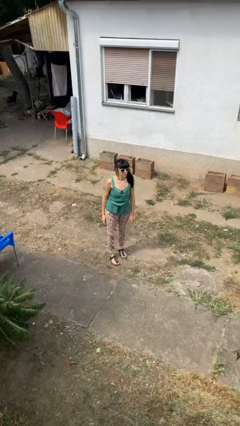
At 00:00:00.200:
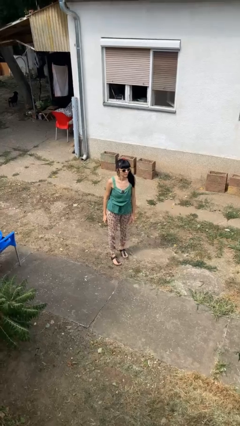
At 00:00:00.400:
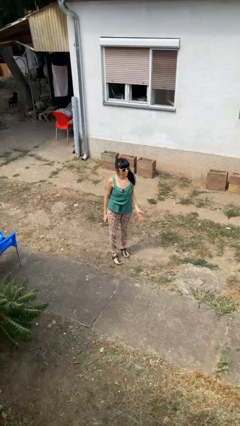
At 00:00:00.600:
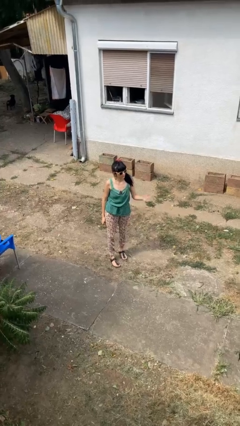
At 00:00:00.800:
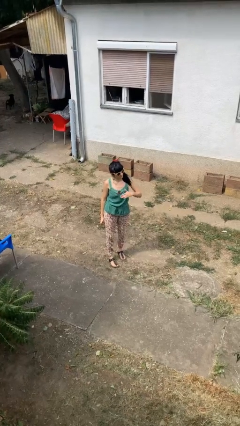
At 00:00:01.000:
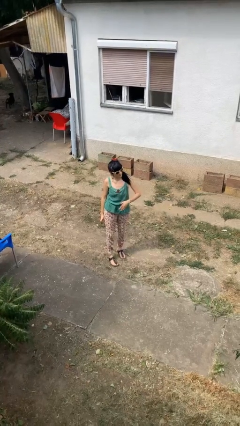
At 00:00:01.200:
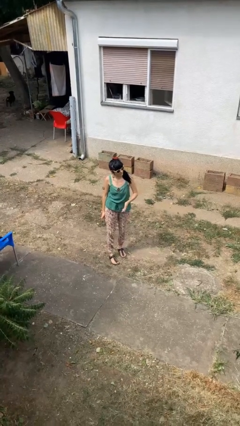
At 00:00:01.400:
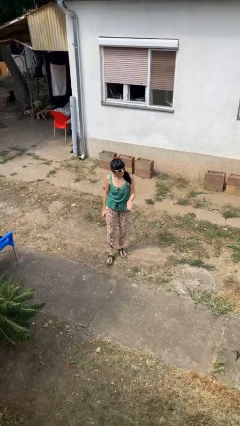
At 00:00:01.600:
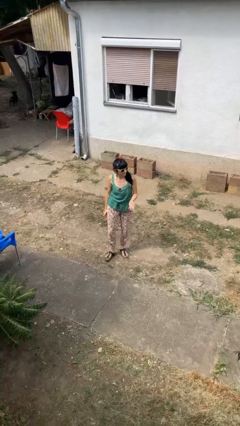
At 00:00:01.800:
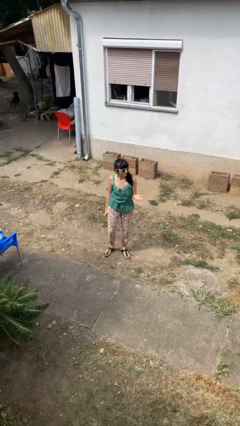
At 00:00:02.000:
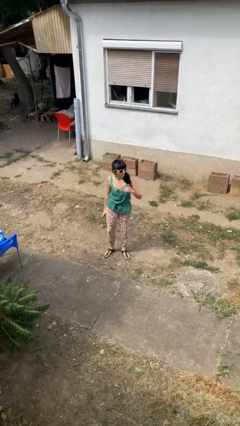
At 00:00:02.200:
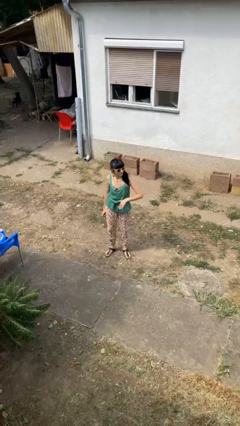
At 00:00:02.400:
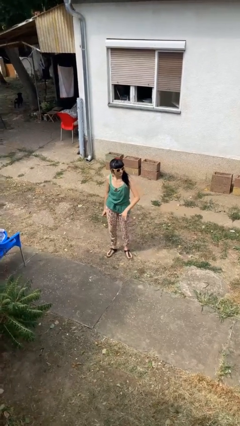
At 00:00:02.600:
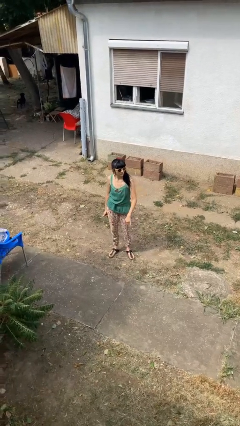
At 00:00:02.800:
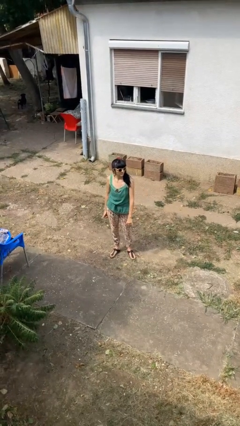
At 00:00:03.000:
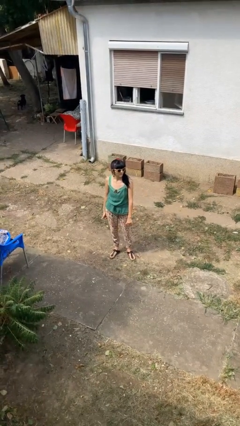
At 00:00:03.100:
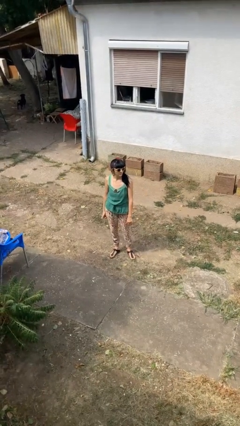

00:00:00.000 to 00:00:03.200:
person gestures come here

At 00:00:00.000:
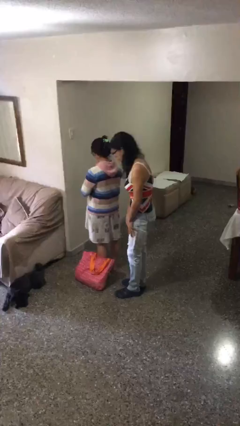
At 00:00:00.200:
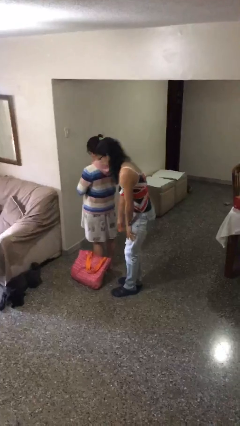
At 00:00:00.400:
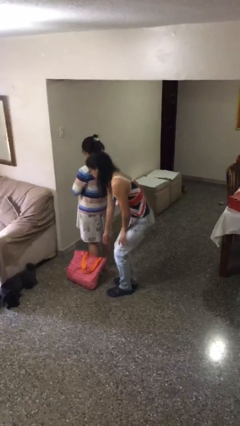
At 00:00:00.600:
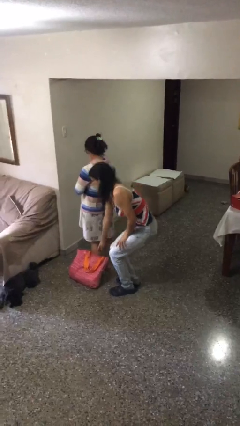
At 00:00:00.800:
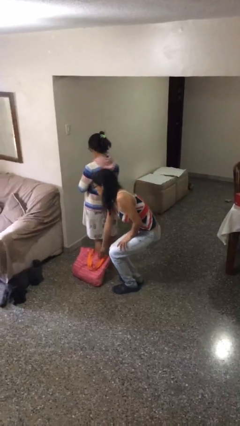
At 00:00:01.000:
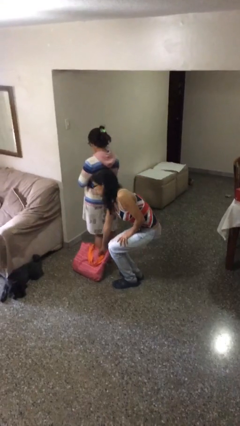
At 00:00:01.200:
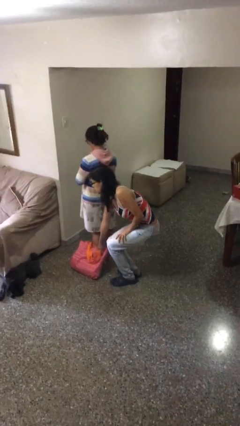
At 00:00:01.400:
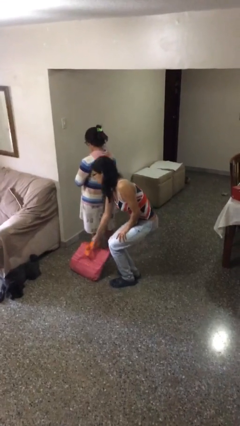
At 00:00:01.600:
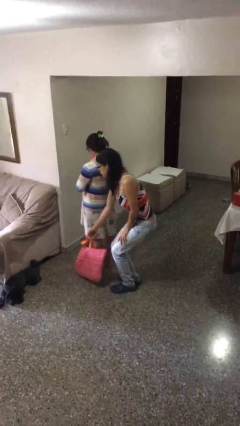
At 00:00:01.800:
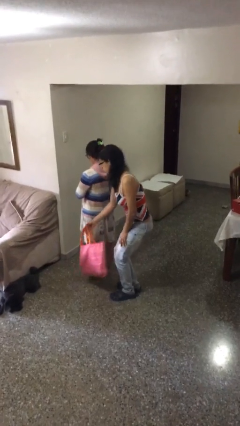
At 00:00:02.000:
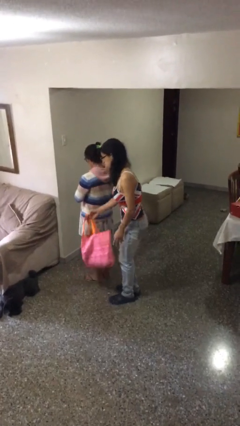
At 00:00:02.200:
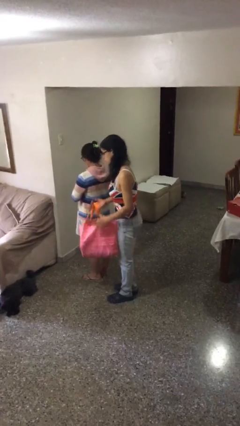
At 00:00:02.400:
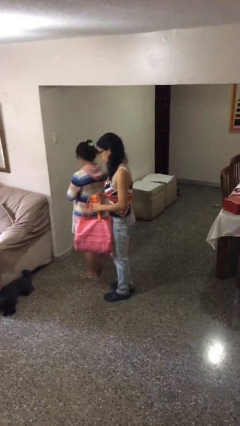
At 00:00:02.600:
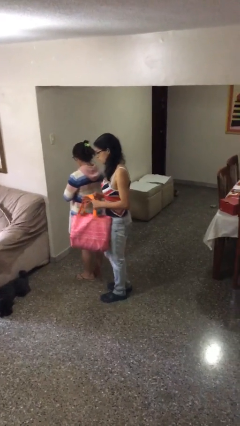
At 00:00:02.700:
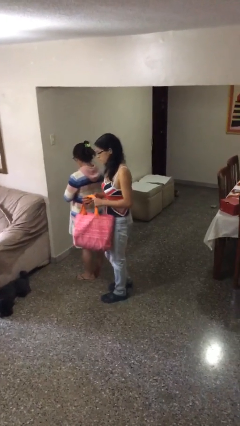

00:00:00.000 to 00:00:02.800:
person steals object from person

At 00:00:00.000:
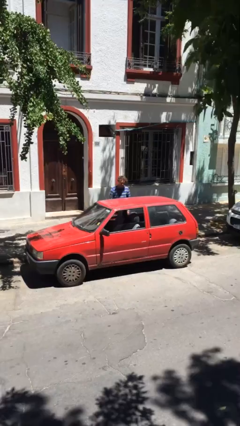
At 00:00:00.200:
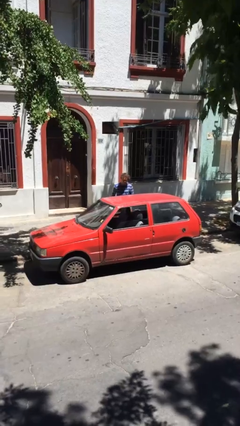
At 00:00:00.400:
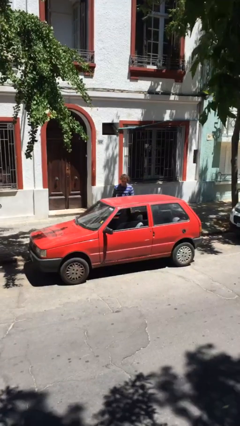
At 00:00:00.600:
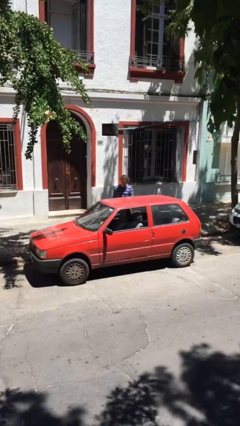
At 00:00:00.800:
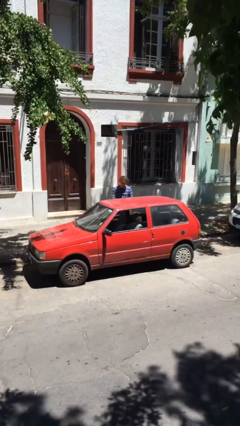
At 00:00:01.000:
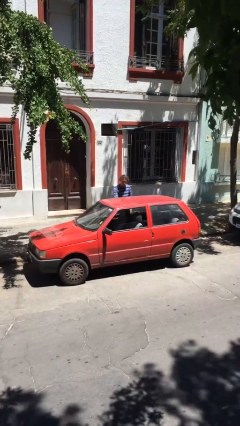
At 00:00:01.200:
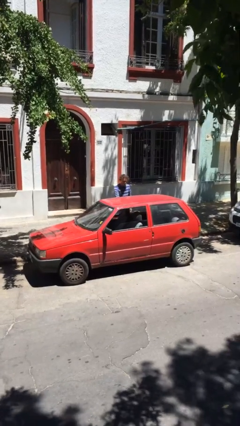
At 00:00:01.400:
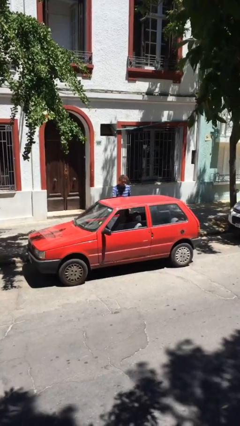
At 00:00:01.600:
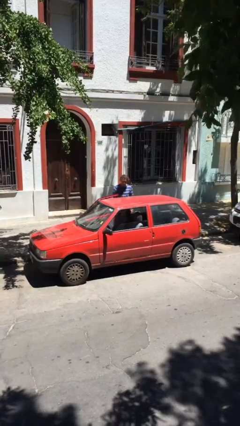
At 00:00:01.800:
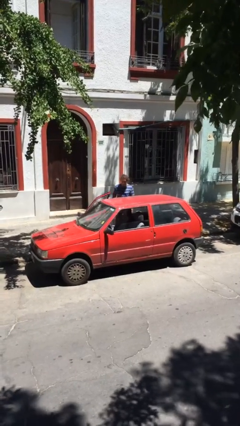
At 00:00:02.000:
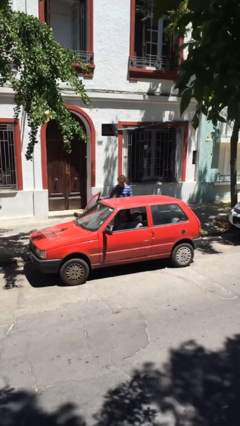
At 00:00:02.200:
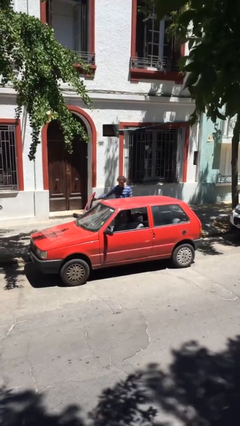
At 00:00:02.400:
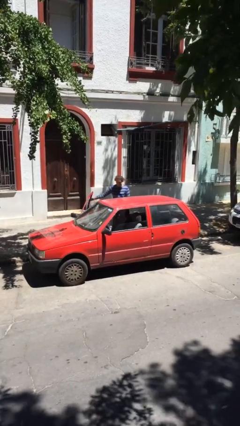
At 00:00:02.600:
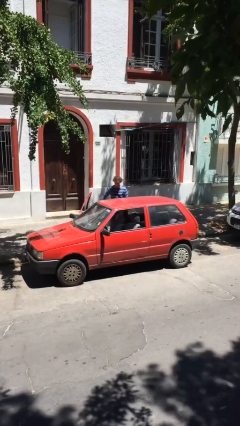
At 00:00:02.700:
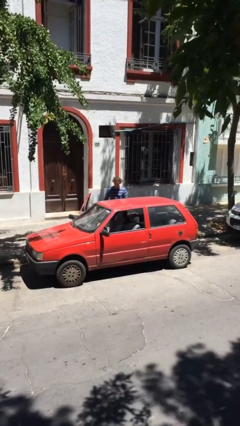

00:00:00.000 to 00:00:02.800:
person opens car door

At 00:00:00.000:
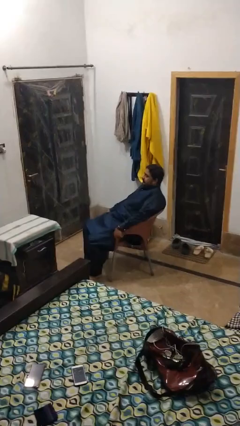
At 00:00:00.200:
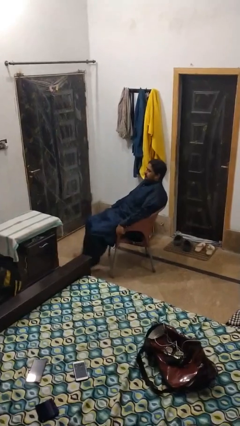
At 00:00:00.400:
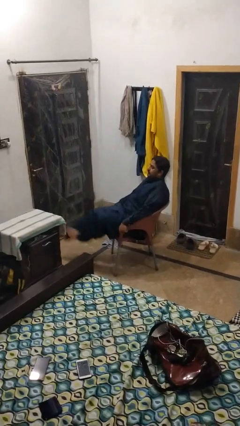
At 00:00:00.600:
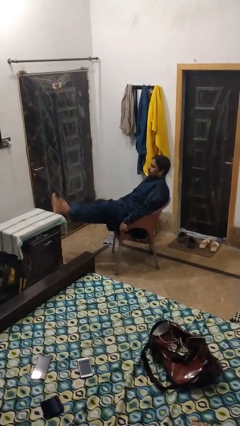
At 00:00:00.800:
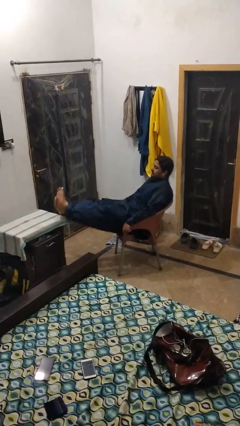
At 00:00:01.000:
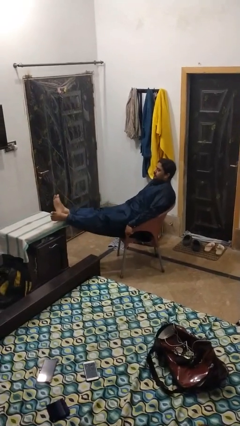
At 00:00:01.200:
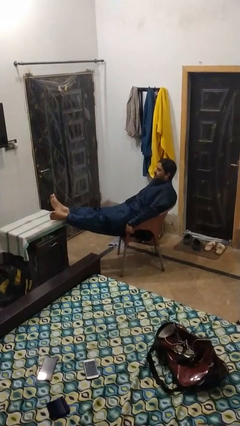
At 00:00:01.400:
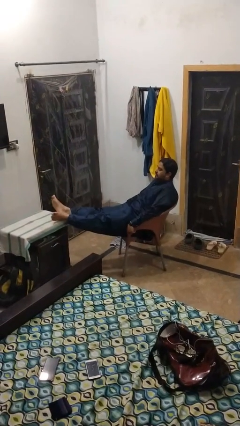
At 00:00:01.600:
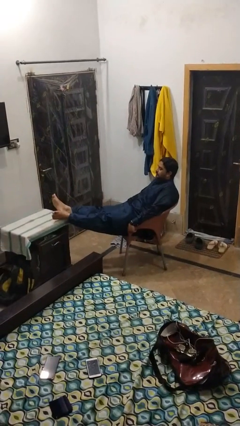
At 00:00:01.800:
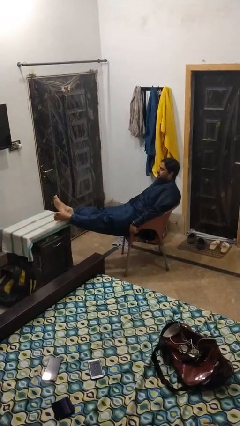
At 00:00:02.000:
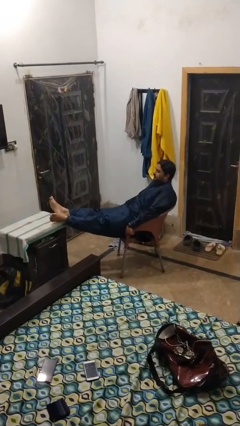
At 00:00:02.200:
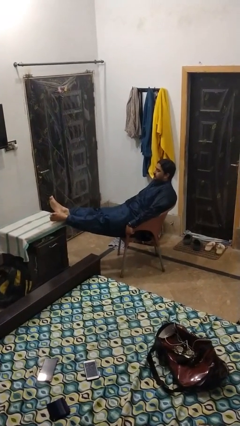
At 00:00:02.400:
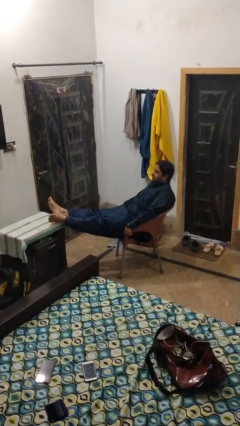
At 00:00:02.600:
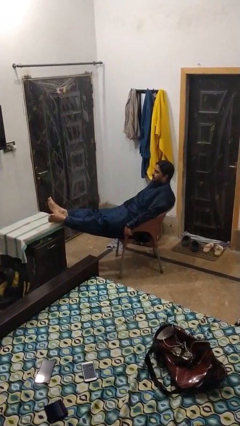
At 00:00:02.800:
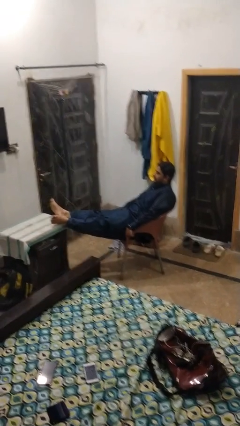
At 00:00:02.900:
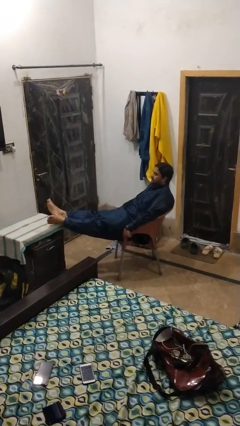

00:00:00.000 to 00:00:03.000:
person puts feet up

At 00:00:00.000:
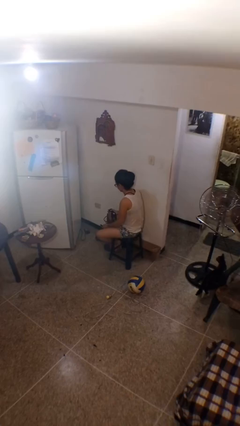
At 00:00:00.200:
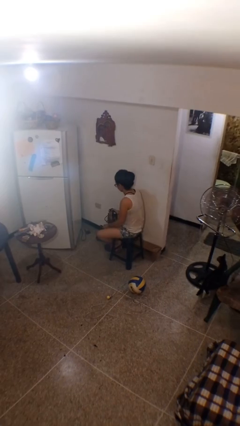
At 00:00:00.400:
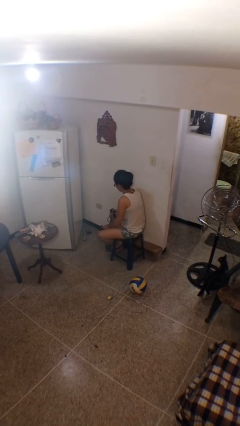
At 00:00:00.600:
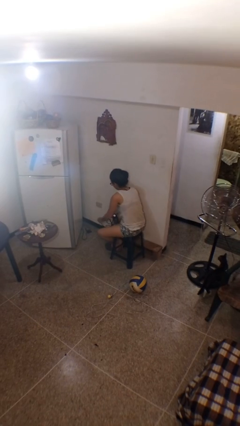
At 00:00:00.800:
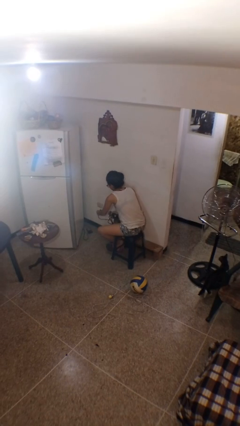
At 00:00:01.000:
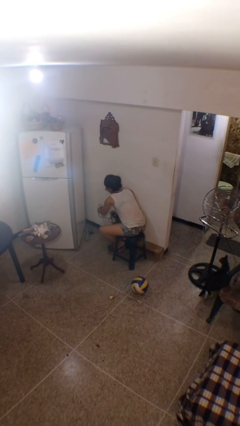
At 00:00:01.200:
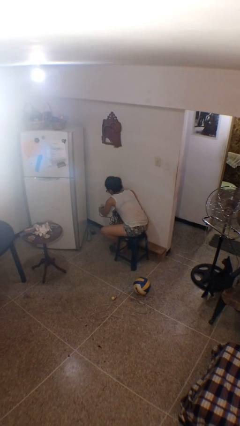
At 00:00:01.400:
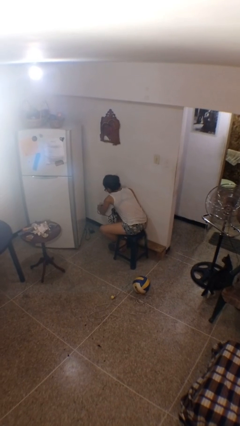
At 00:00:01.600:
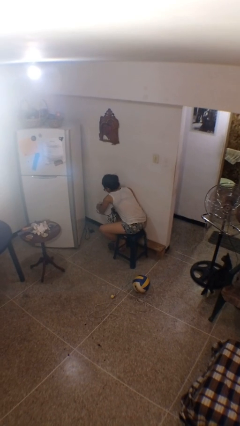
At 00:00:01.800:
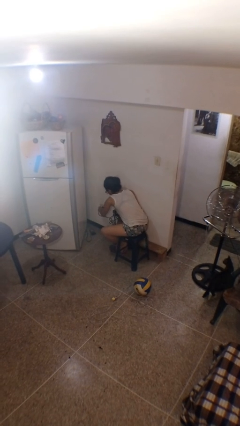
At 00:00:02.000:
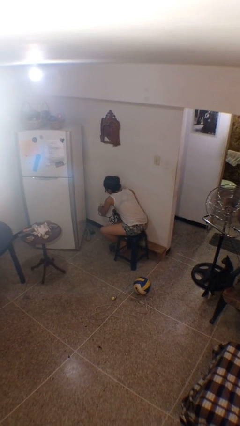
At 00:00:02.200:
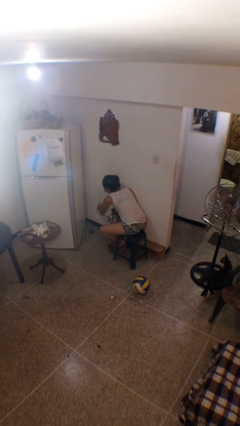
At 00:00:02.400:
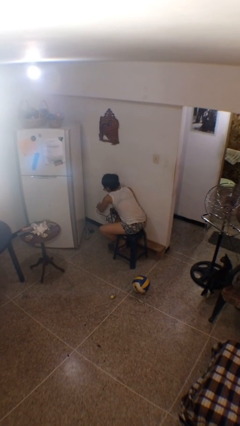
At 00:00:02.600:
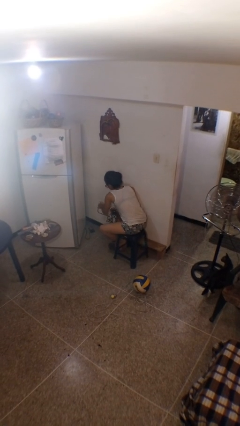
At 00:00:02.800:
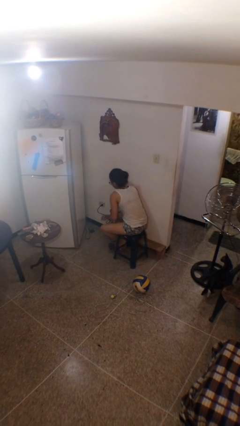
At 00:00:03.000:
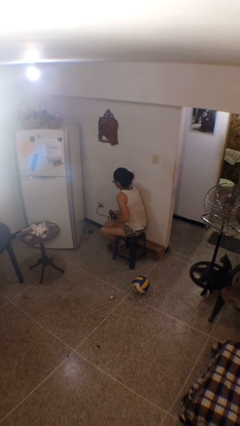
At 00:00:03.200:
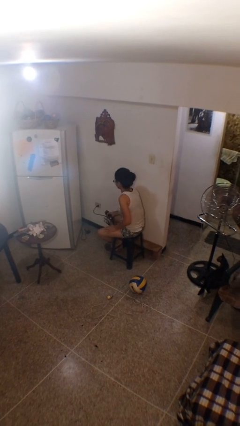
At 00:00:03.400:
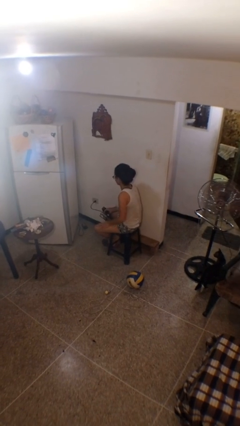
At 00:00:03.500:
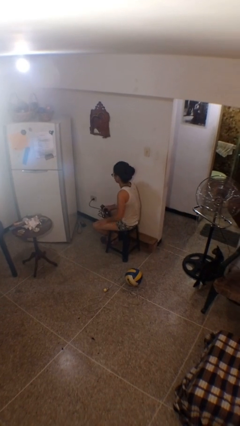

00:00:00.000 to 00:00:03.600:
person plugs into electrical socket

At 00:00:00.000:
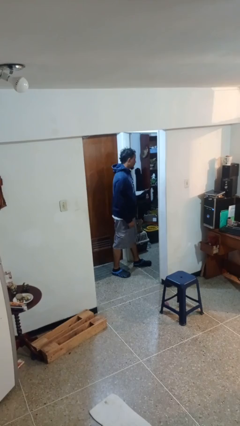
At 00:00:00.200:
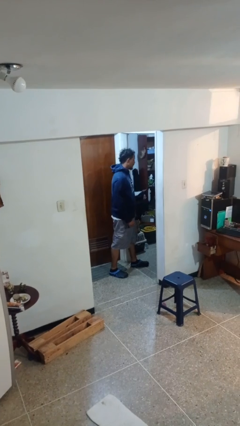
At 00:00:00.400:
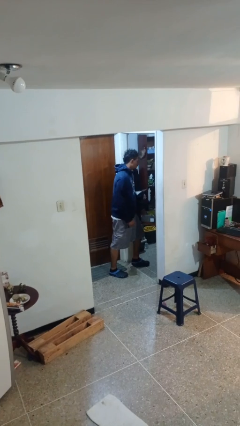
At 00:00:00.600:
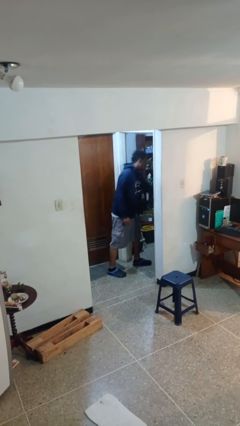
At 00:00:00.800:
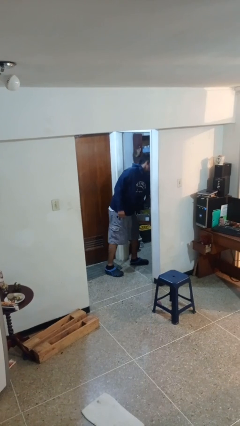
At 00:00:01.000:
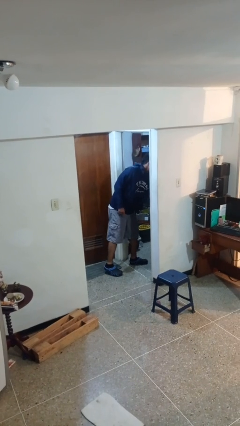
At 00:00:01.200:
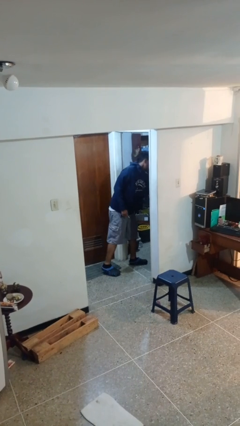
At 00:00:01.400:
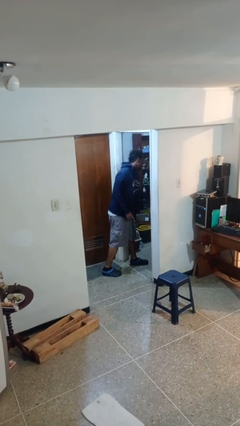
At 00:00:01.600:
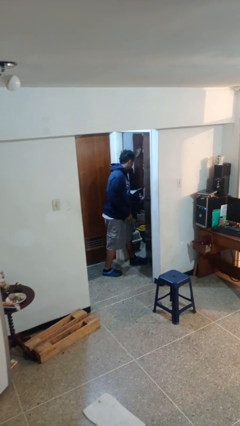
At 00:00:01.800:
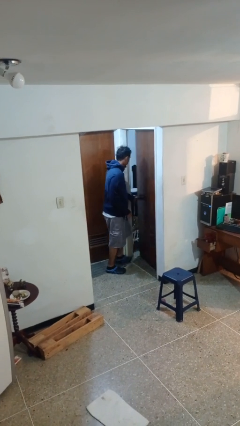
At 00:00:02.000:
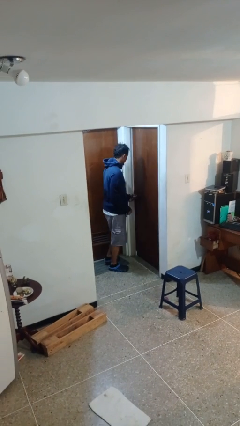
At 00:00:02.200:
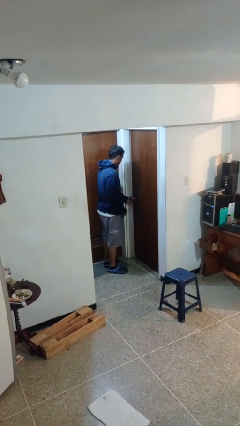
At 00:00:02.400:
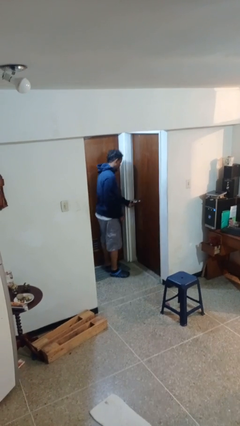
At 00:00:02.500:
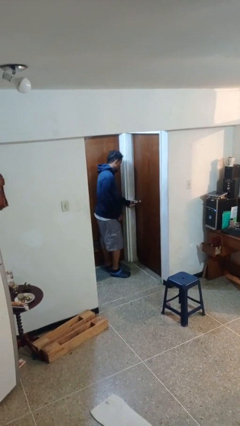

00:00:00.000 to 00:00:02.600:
person closes facility door
